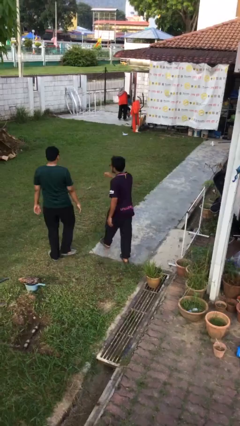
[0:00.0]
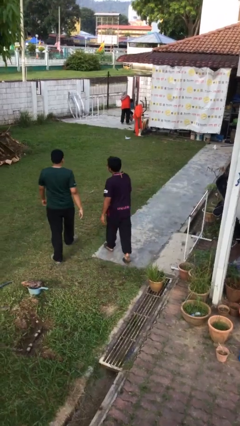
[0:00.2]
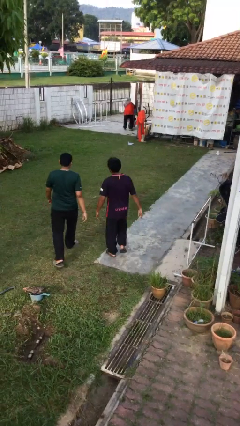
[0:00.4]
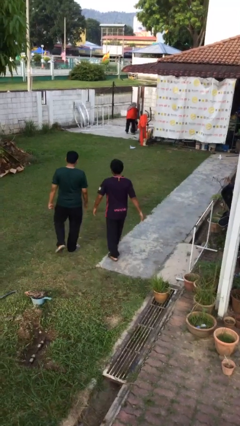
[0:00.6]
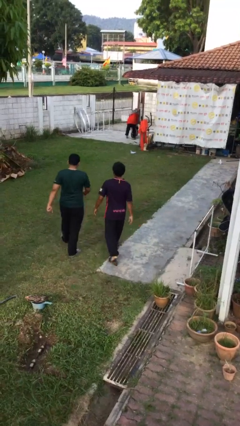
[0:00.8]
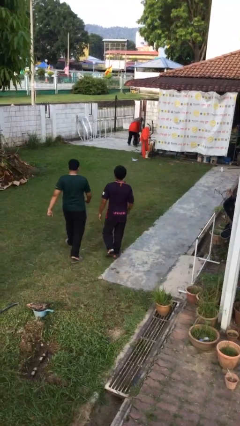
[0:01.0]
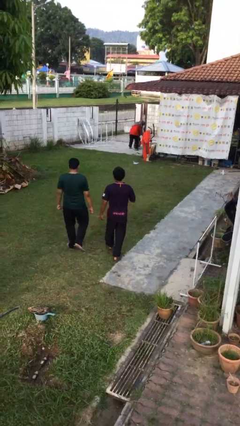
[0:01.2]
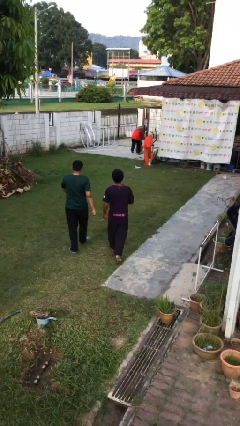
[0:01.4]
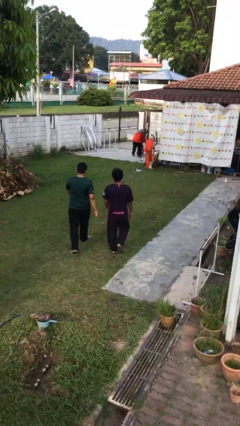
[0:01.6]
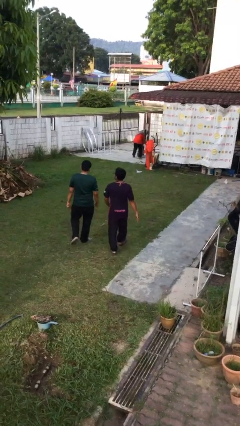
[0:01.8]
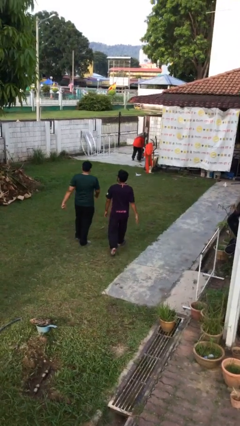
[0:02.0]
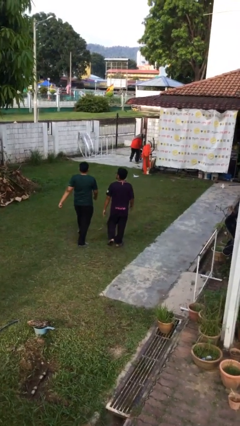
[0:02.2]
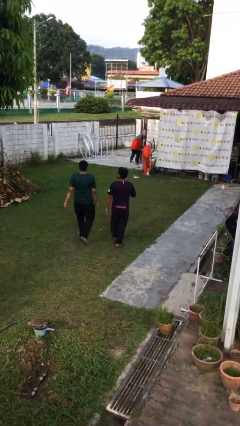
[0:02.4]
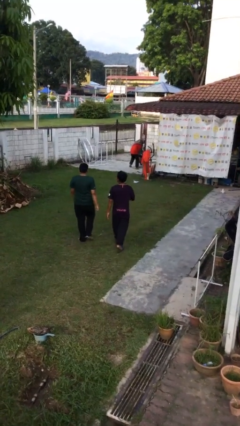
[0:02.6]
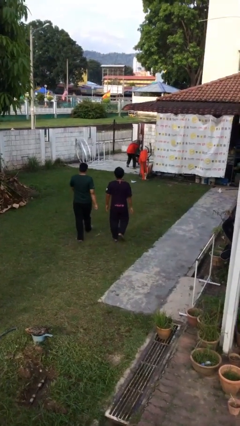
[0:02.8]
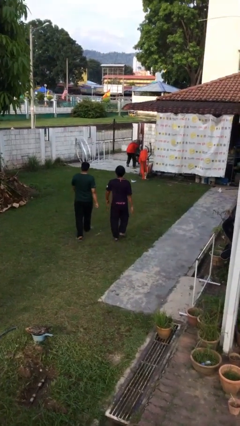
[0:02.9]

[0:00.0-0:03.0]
person talks to person

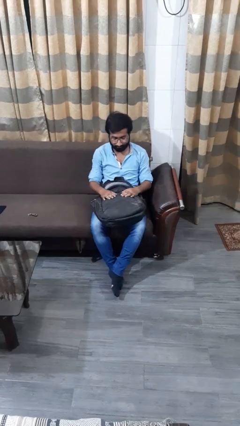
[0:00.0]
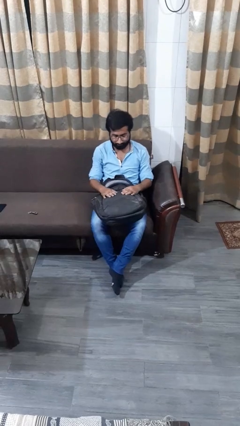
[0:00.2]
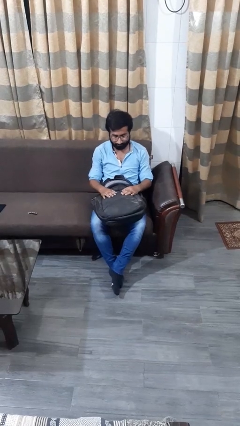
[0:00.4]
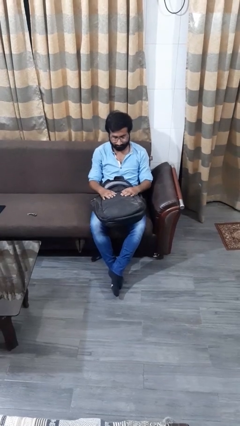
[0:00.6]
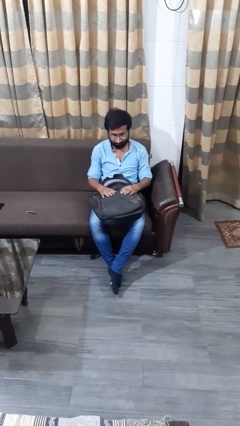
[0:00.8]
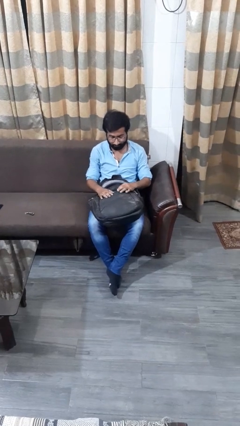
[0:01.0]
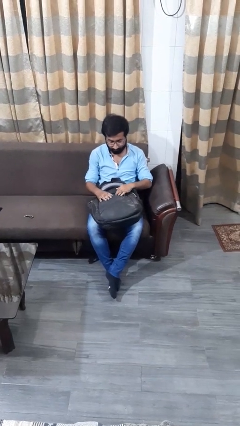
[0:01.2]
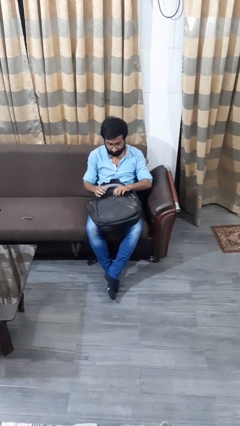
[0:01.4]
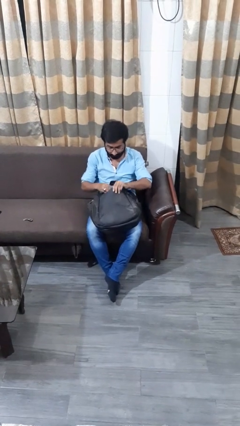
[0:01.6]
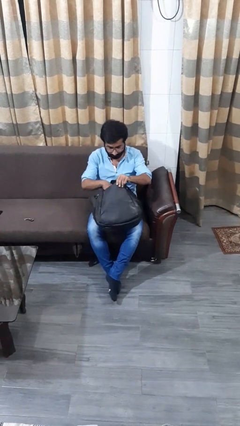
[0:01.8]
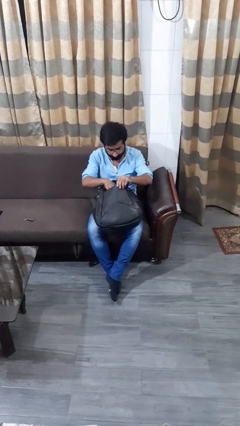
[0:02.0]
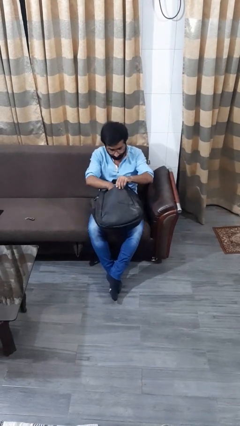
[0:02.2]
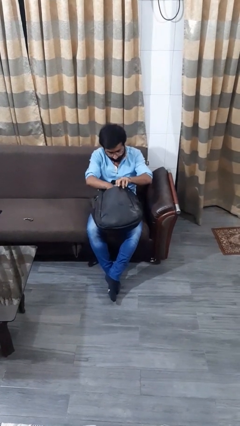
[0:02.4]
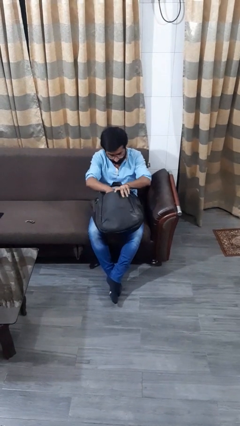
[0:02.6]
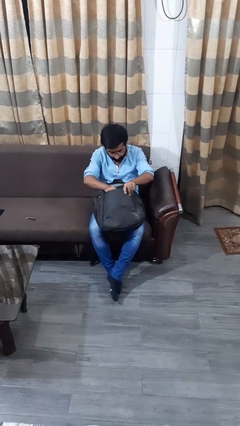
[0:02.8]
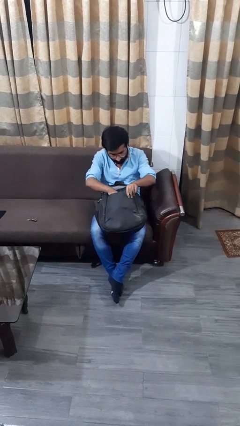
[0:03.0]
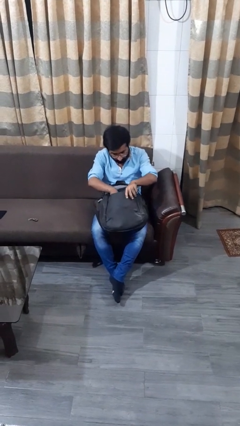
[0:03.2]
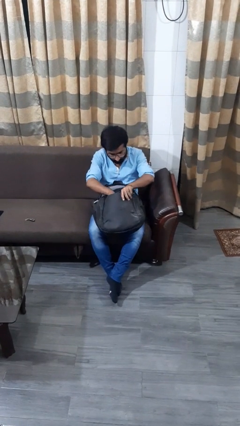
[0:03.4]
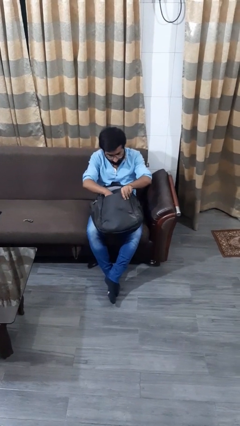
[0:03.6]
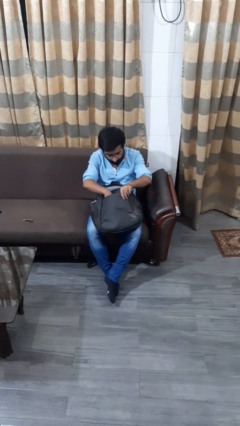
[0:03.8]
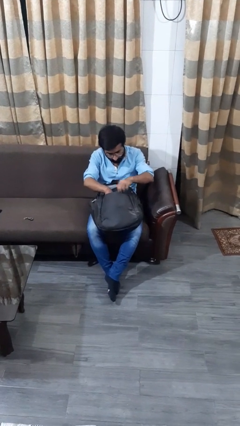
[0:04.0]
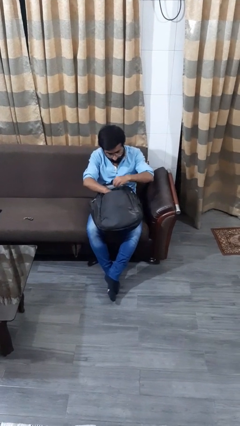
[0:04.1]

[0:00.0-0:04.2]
person searches in backpack

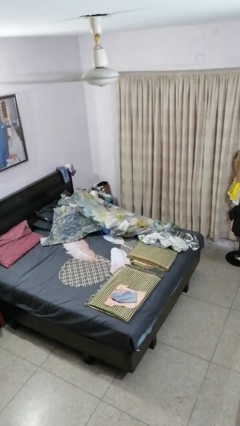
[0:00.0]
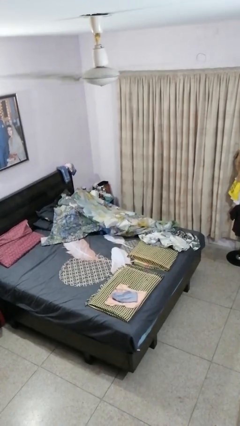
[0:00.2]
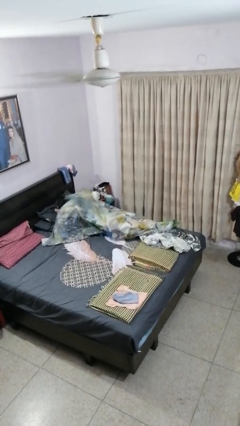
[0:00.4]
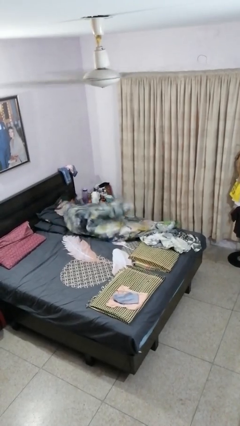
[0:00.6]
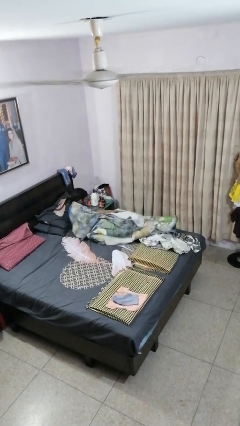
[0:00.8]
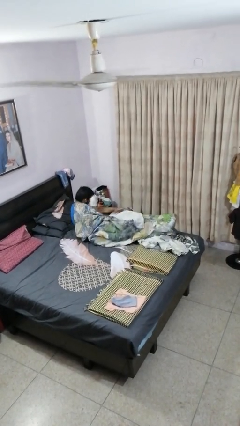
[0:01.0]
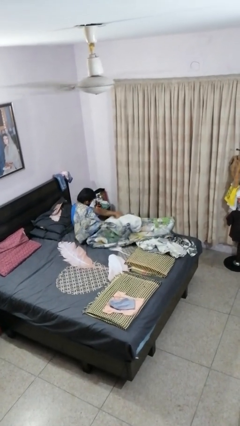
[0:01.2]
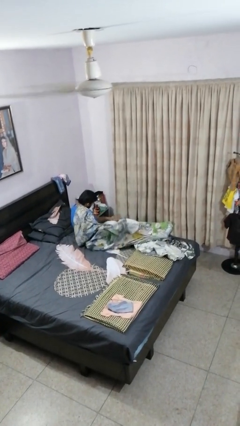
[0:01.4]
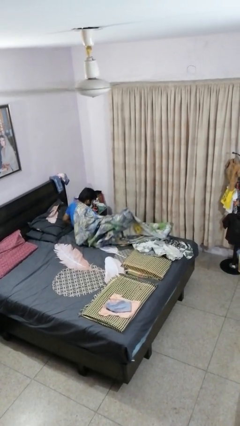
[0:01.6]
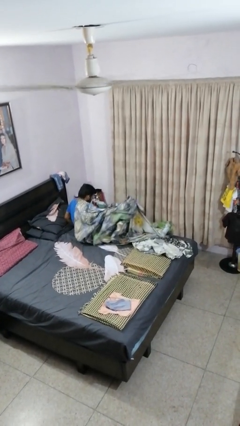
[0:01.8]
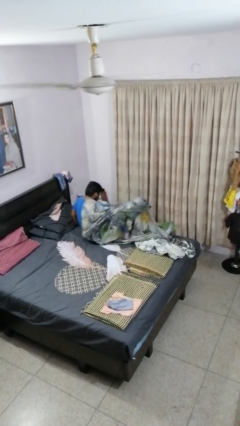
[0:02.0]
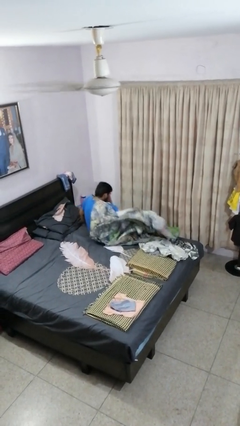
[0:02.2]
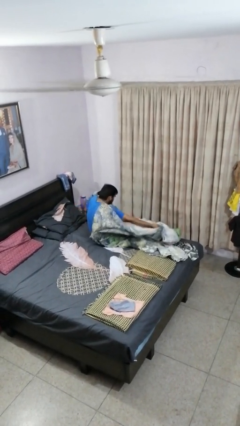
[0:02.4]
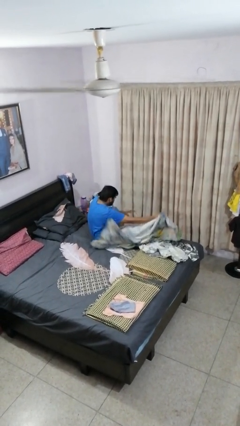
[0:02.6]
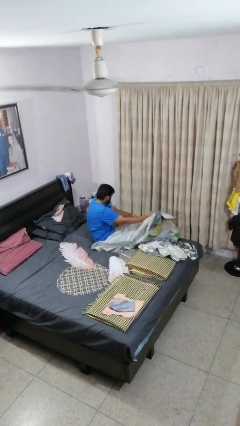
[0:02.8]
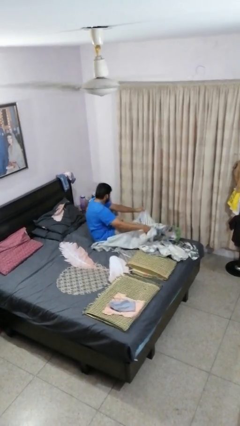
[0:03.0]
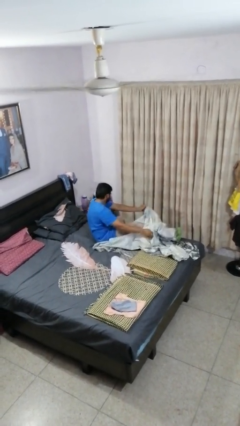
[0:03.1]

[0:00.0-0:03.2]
person uncovers with bedsheets

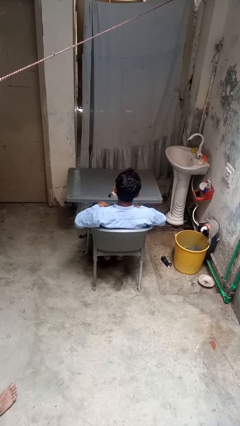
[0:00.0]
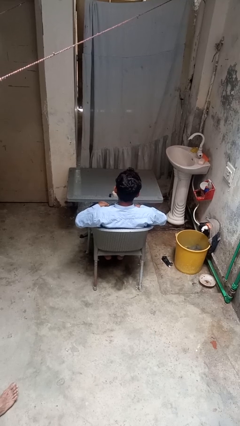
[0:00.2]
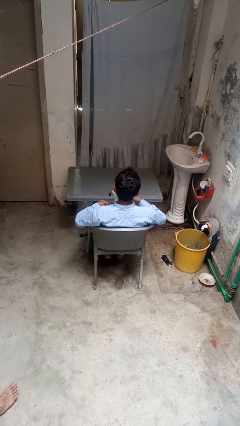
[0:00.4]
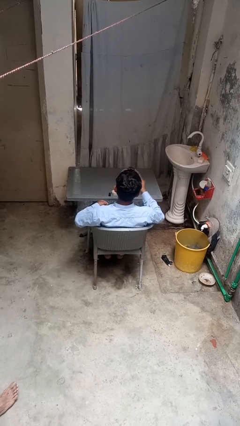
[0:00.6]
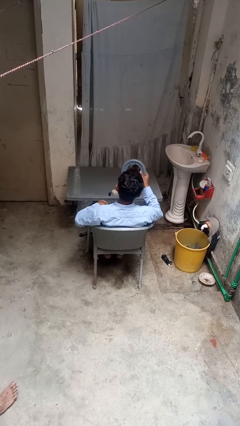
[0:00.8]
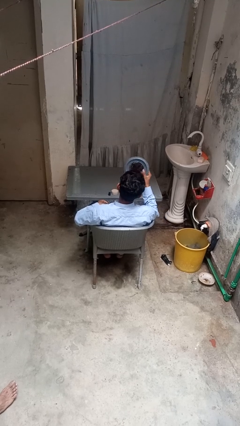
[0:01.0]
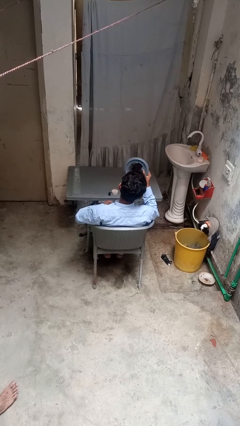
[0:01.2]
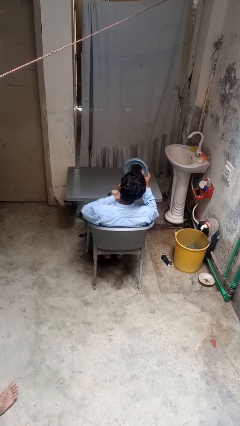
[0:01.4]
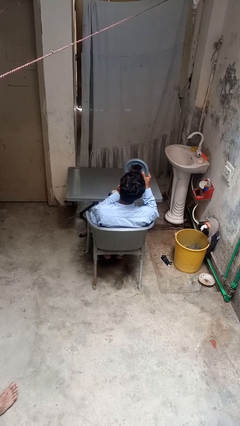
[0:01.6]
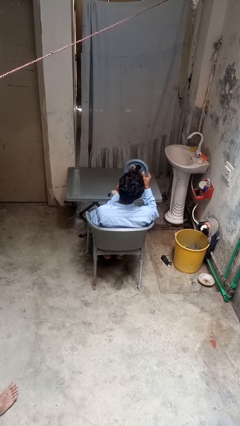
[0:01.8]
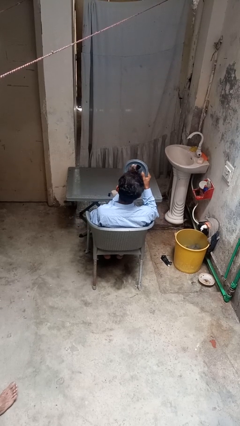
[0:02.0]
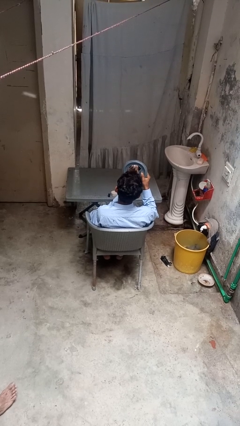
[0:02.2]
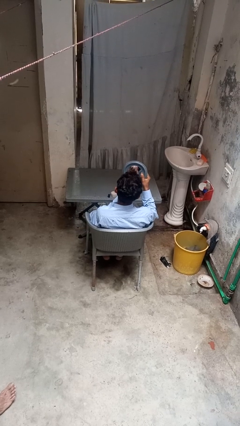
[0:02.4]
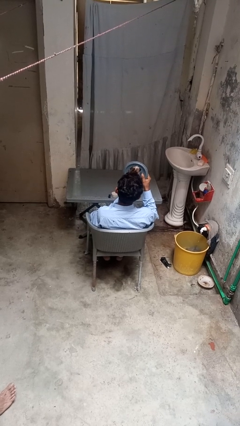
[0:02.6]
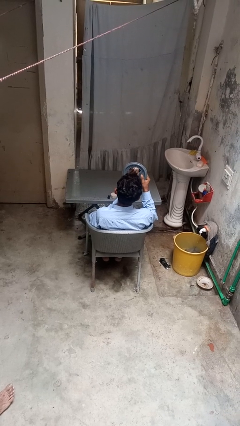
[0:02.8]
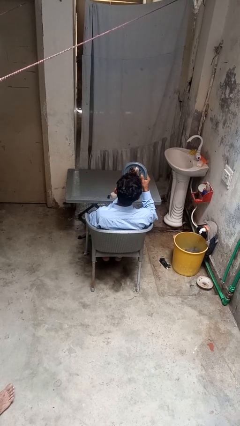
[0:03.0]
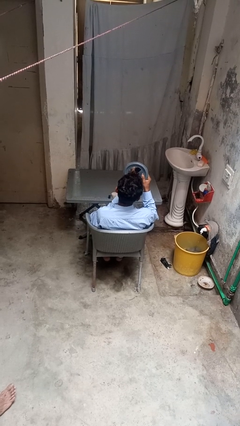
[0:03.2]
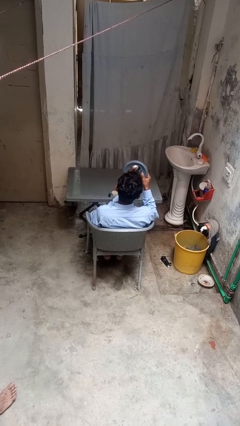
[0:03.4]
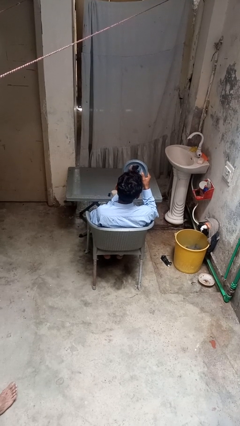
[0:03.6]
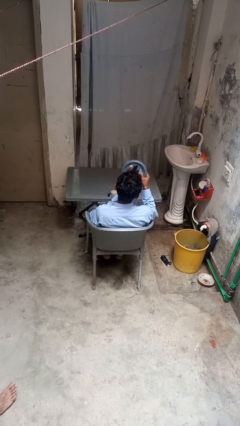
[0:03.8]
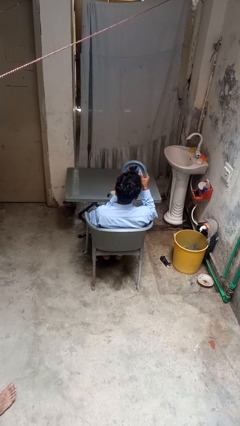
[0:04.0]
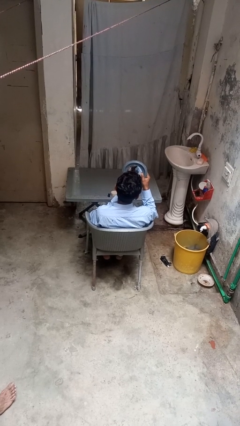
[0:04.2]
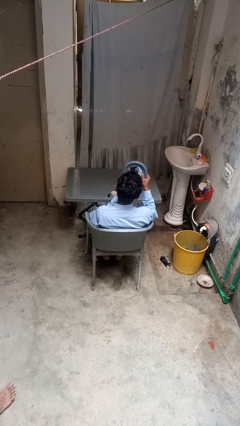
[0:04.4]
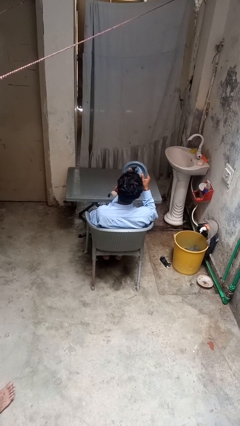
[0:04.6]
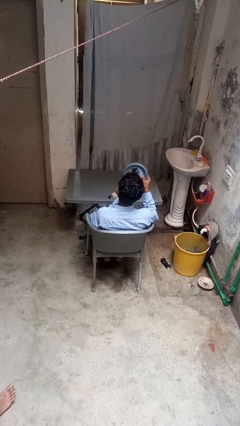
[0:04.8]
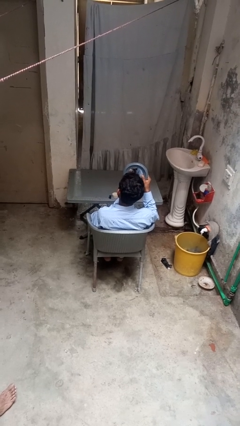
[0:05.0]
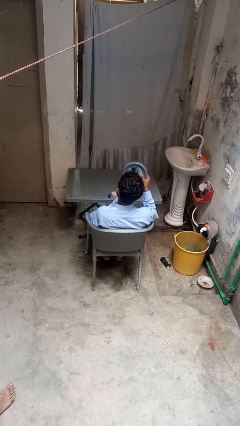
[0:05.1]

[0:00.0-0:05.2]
person applies lip makeup

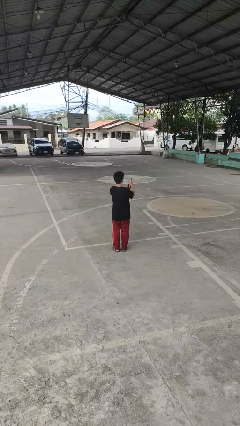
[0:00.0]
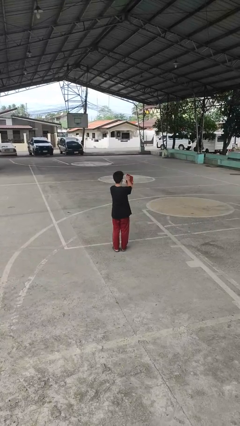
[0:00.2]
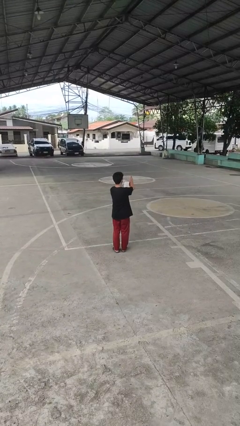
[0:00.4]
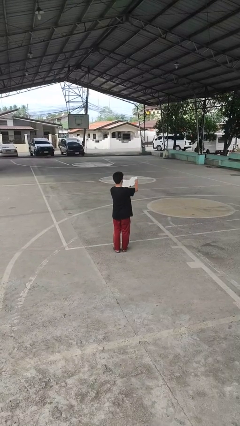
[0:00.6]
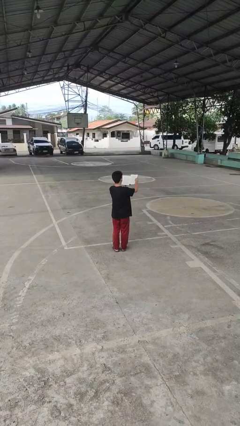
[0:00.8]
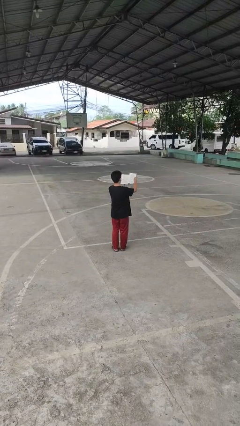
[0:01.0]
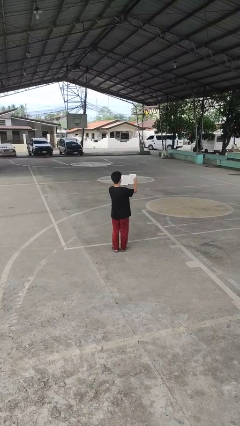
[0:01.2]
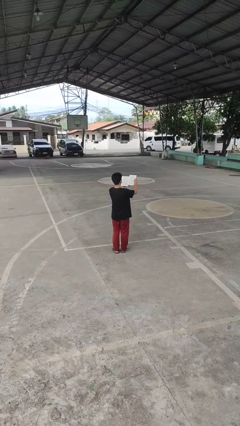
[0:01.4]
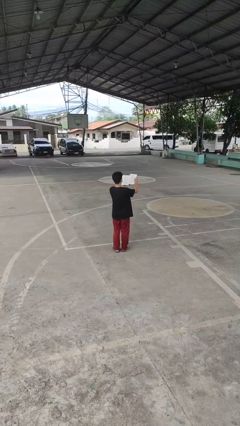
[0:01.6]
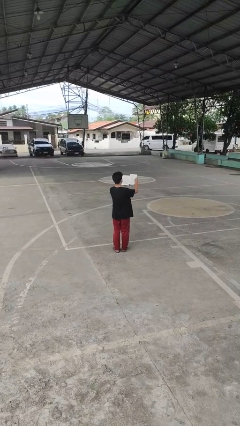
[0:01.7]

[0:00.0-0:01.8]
person reads book

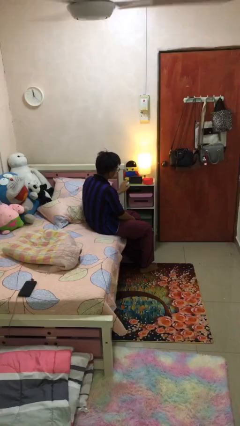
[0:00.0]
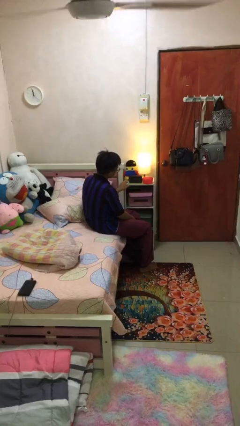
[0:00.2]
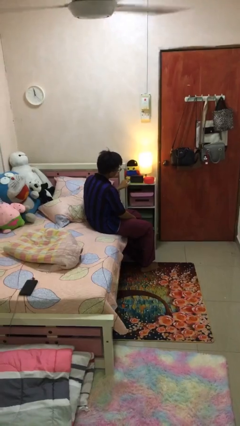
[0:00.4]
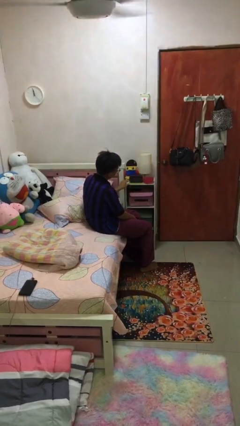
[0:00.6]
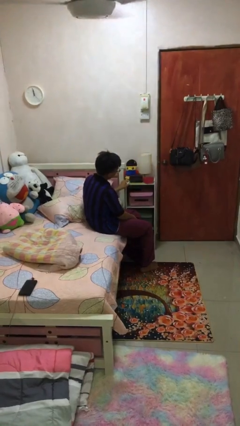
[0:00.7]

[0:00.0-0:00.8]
person turns off lamp
